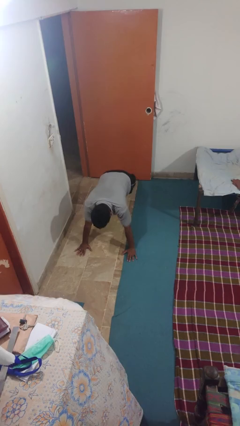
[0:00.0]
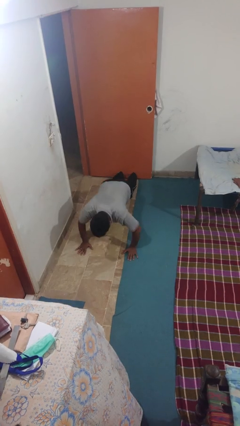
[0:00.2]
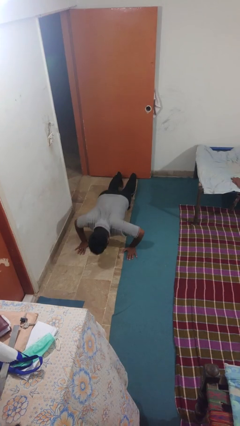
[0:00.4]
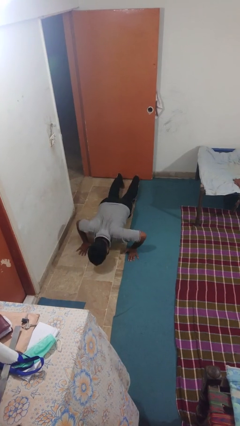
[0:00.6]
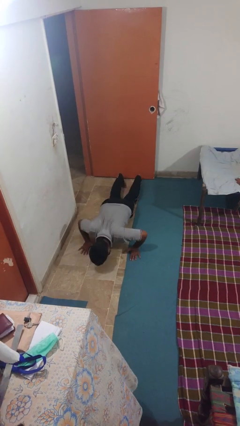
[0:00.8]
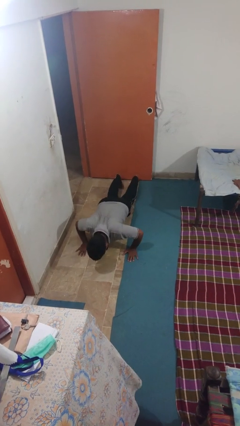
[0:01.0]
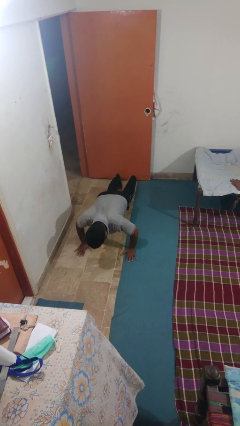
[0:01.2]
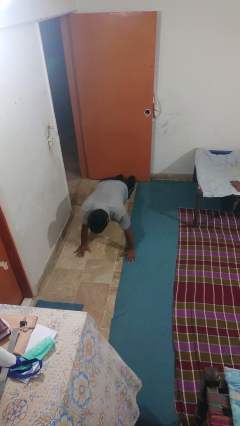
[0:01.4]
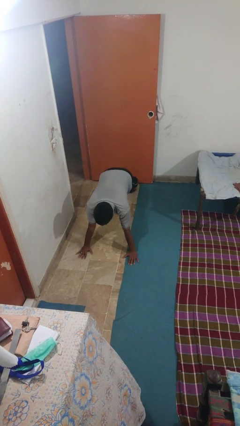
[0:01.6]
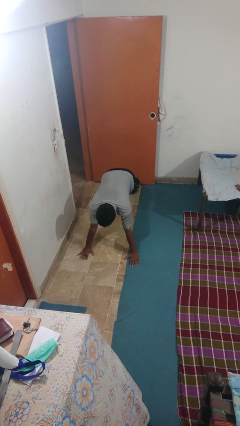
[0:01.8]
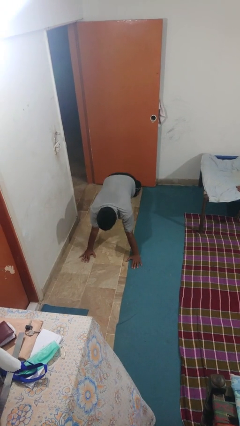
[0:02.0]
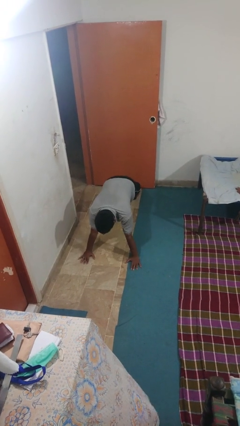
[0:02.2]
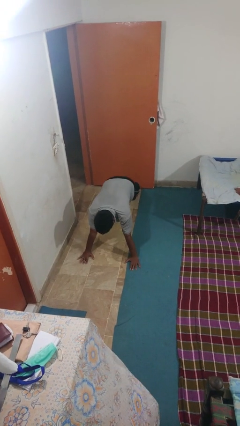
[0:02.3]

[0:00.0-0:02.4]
person exercises with pushup

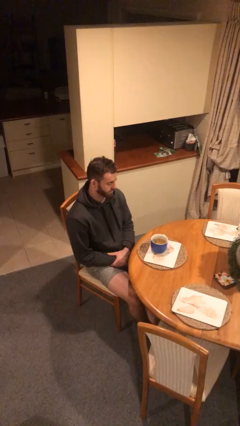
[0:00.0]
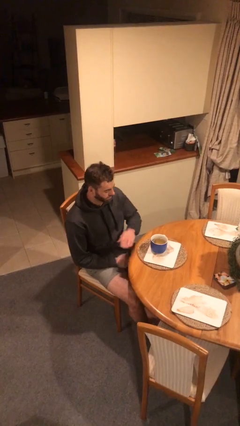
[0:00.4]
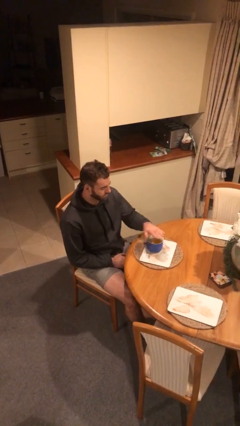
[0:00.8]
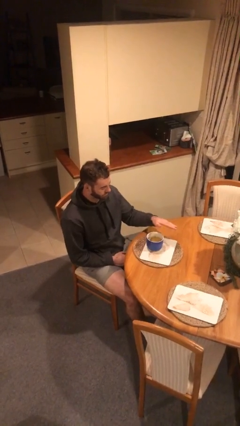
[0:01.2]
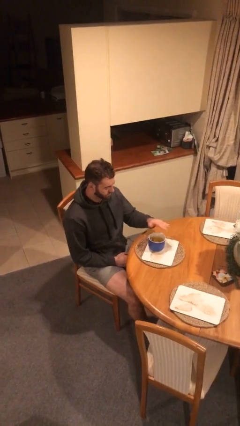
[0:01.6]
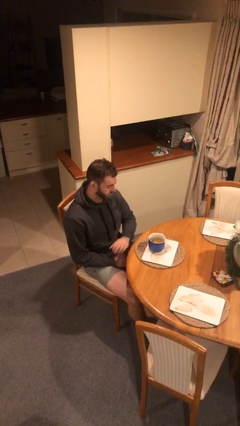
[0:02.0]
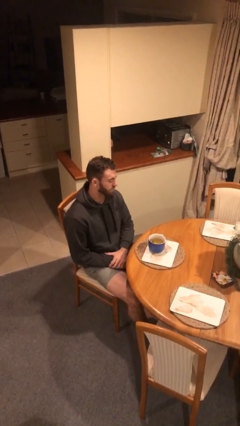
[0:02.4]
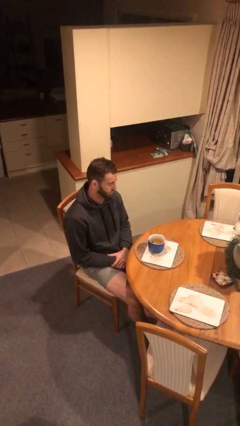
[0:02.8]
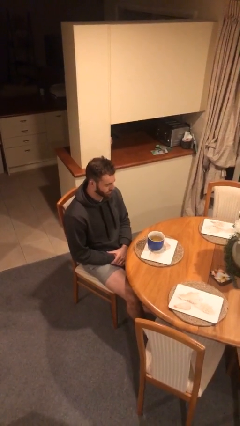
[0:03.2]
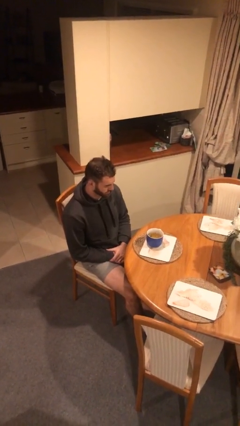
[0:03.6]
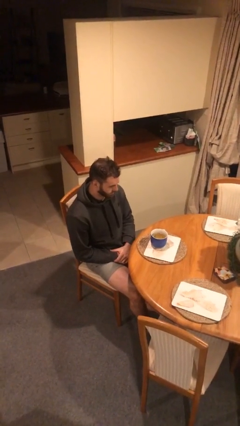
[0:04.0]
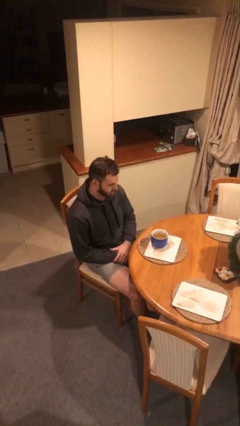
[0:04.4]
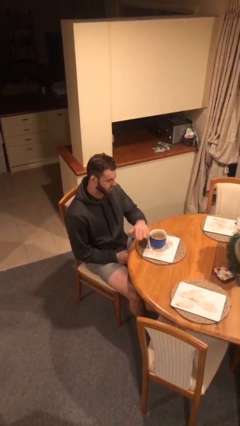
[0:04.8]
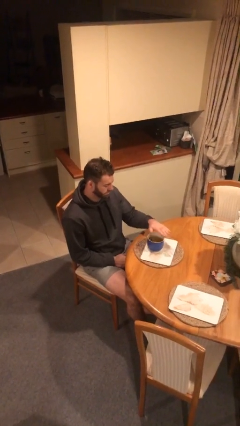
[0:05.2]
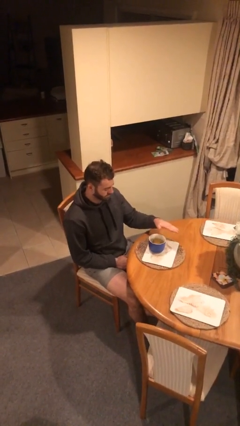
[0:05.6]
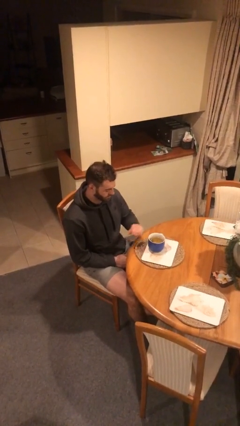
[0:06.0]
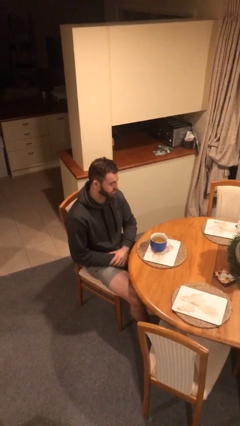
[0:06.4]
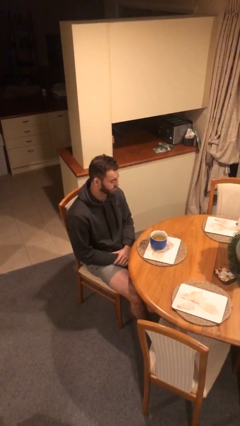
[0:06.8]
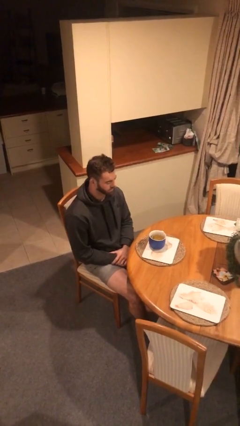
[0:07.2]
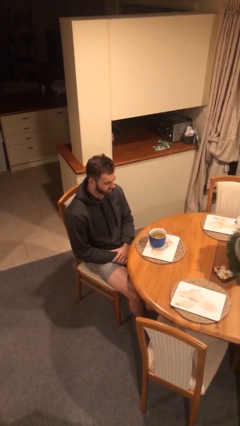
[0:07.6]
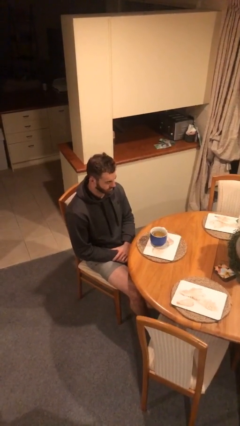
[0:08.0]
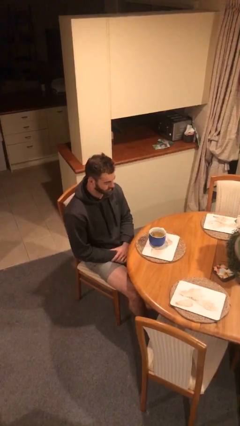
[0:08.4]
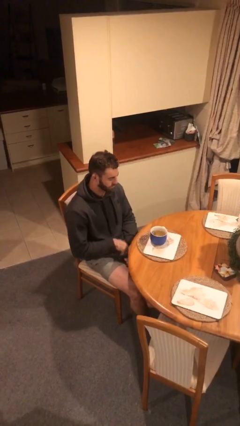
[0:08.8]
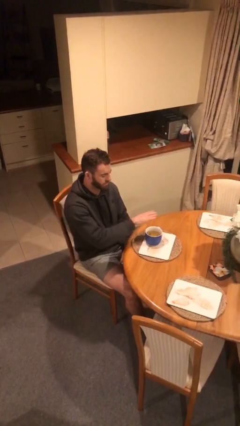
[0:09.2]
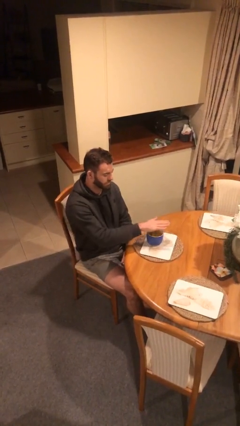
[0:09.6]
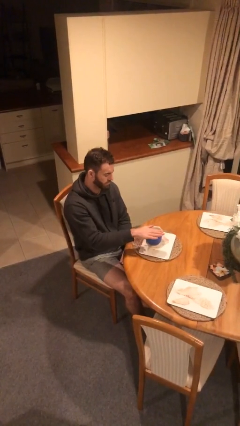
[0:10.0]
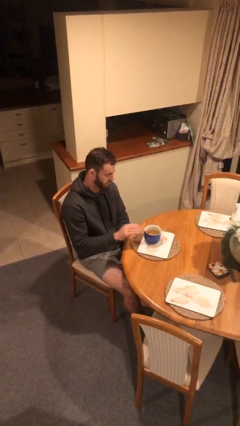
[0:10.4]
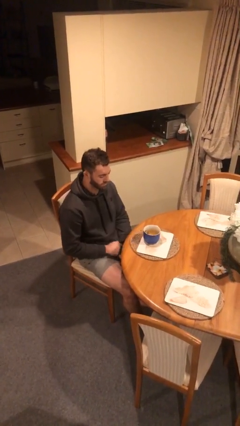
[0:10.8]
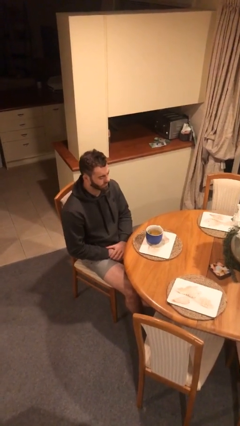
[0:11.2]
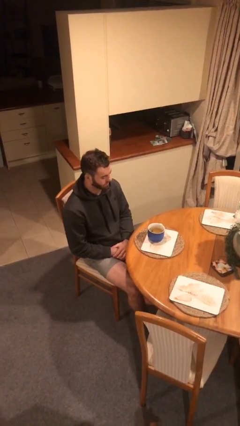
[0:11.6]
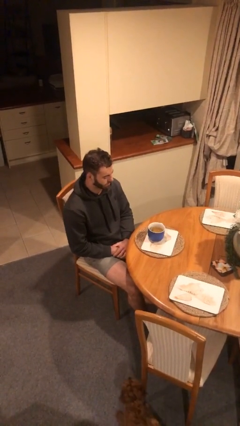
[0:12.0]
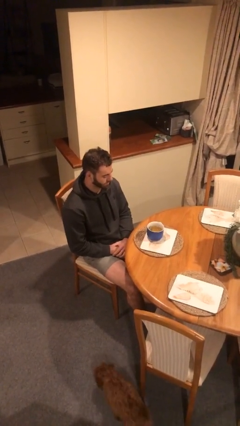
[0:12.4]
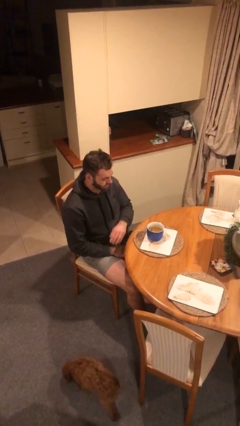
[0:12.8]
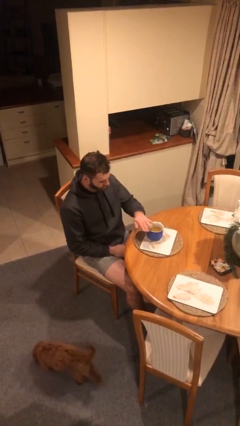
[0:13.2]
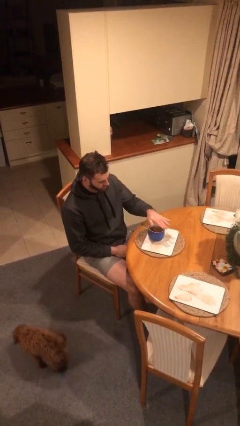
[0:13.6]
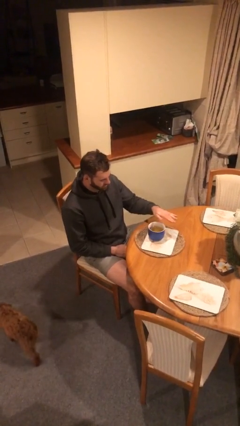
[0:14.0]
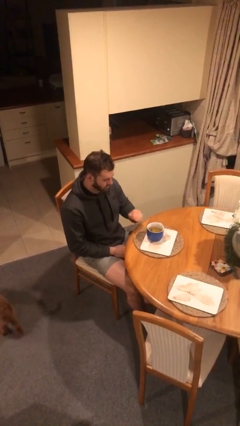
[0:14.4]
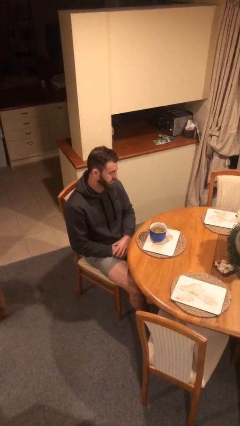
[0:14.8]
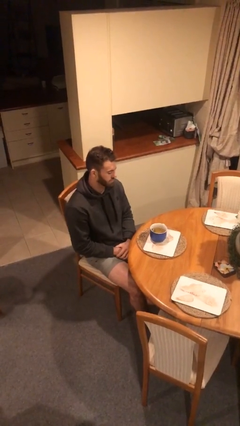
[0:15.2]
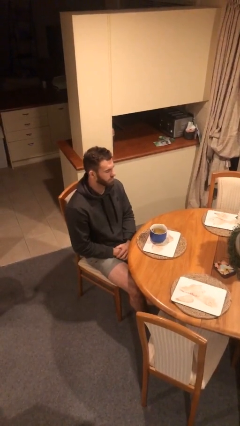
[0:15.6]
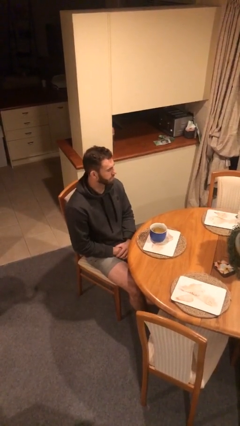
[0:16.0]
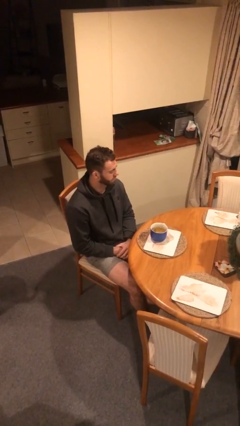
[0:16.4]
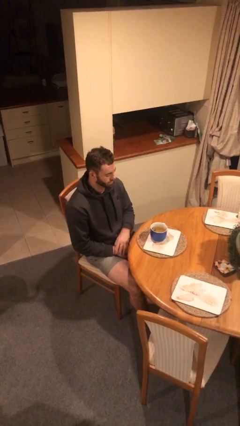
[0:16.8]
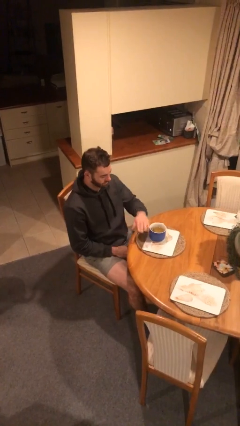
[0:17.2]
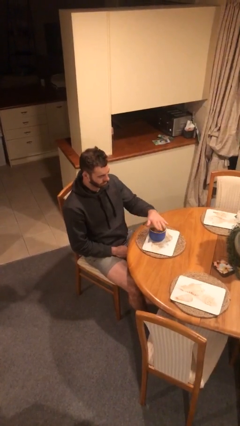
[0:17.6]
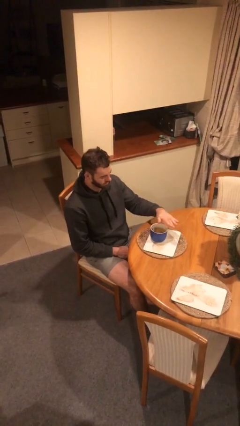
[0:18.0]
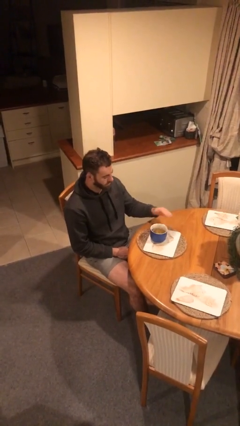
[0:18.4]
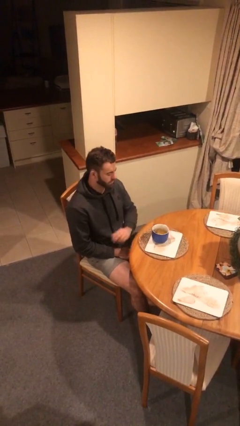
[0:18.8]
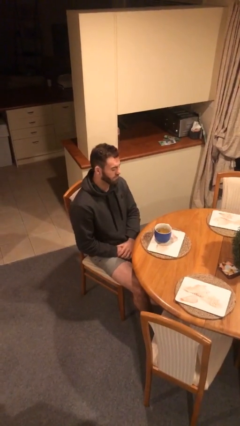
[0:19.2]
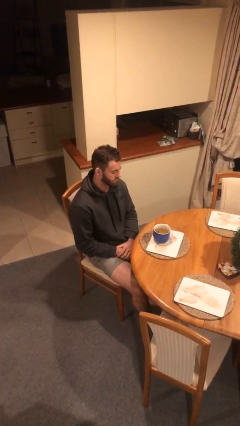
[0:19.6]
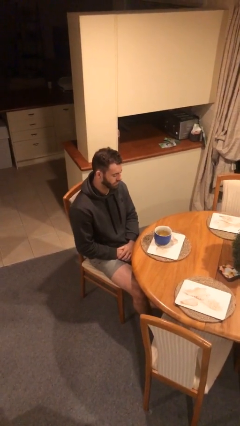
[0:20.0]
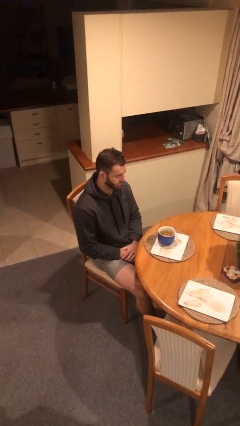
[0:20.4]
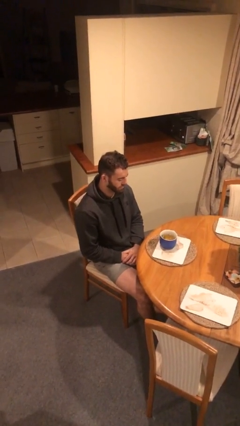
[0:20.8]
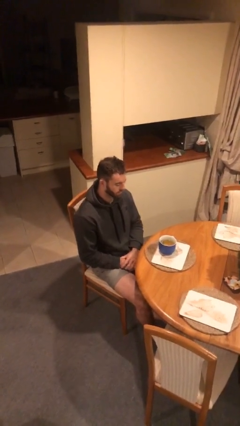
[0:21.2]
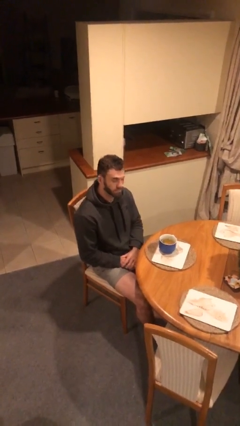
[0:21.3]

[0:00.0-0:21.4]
person waves hand over object

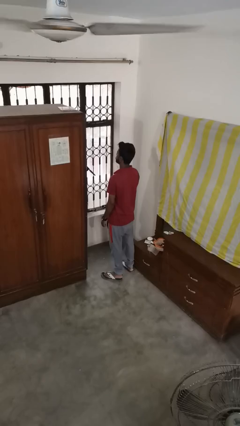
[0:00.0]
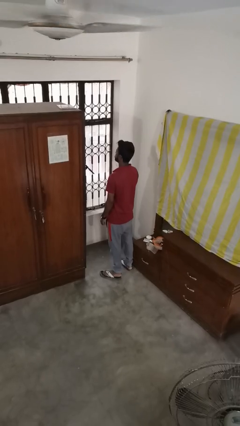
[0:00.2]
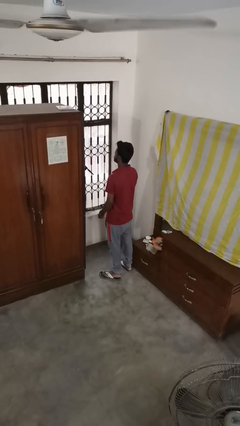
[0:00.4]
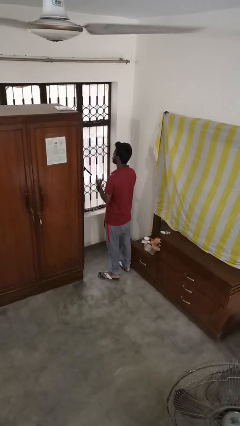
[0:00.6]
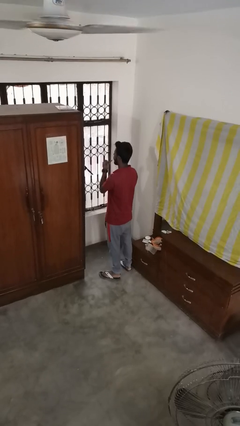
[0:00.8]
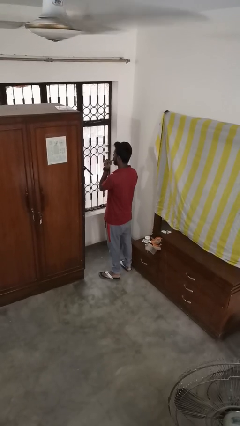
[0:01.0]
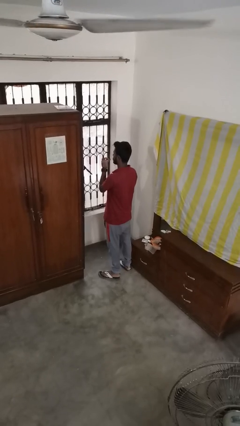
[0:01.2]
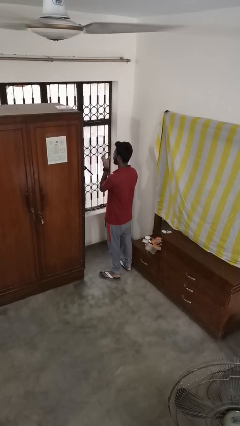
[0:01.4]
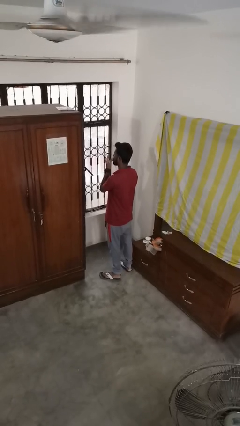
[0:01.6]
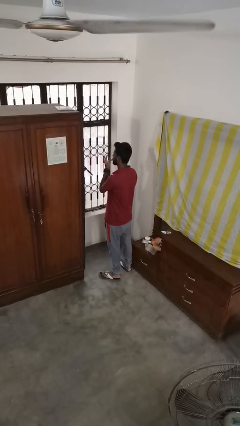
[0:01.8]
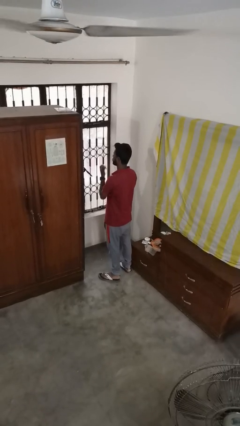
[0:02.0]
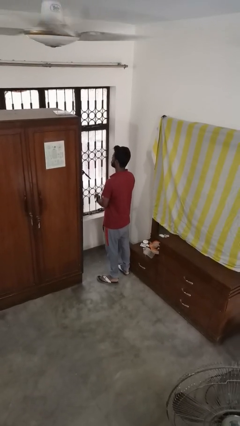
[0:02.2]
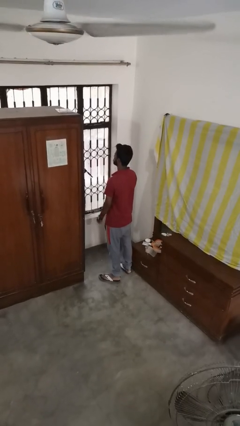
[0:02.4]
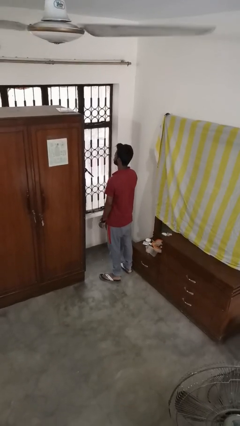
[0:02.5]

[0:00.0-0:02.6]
person licks fingers

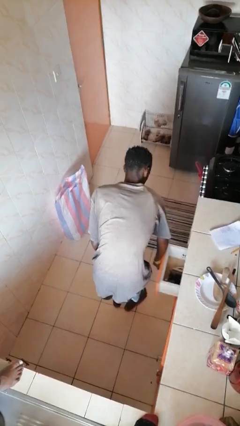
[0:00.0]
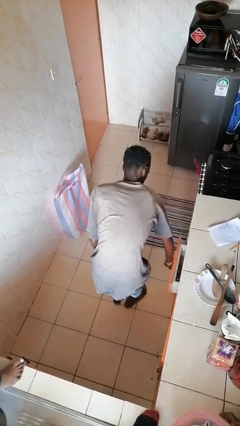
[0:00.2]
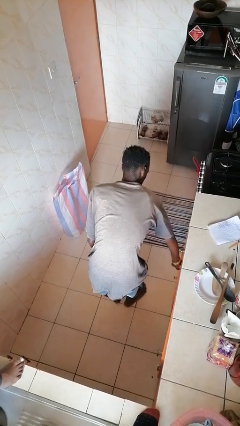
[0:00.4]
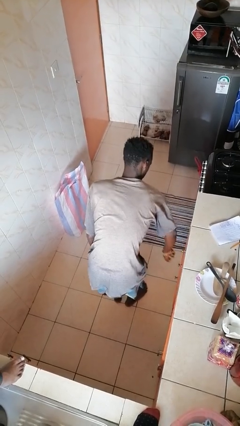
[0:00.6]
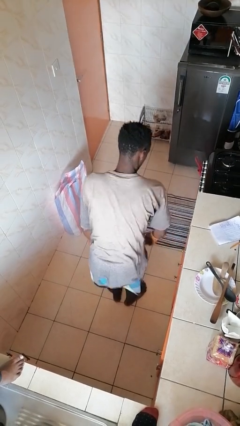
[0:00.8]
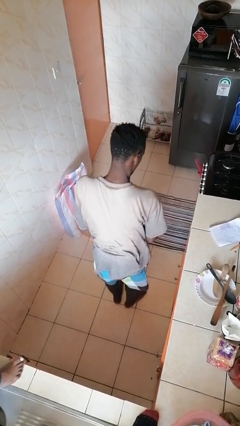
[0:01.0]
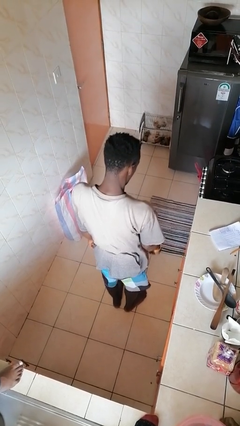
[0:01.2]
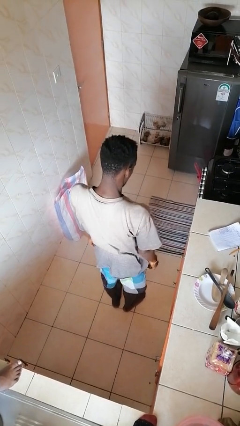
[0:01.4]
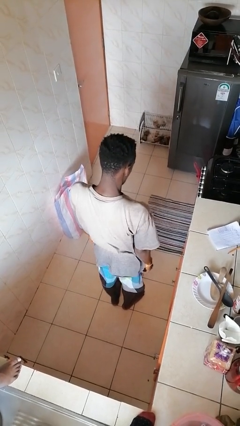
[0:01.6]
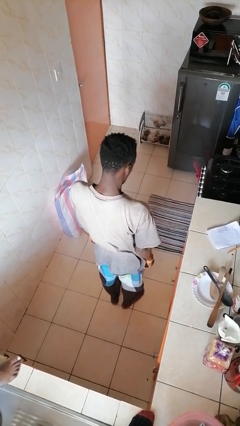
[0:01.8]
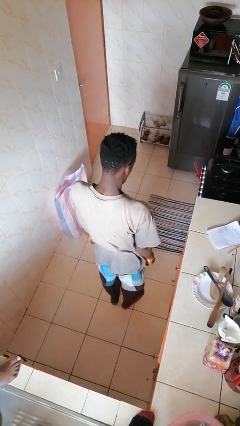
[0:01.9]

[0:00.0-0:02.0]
person closes kitchen drawer
